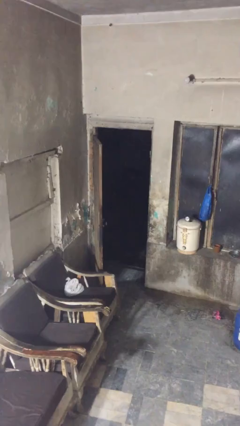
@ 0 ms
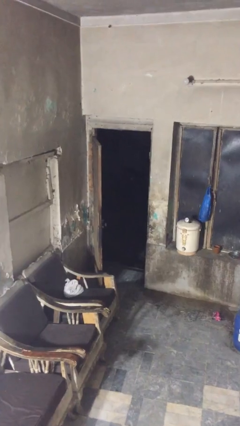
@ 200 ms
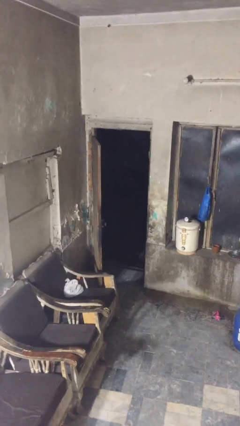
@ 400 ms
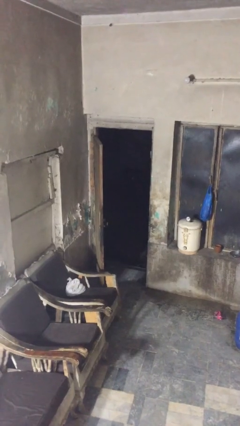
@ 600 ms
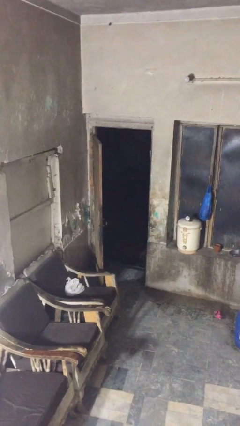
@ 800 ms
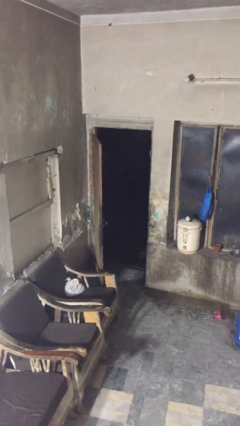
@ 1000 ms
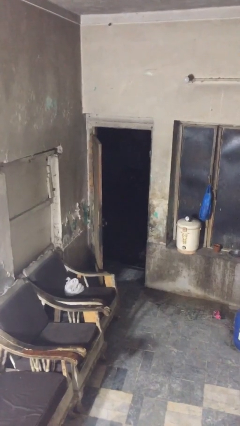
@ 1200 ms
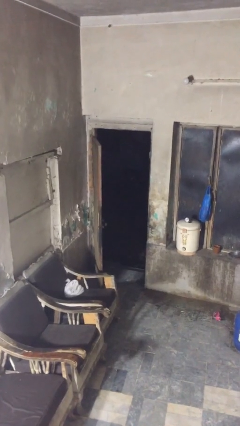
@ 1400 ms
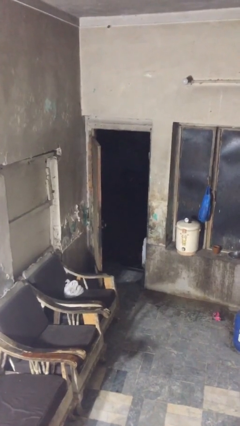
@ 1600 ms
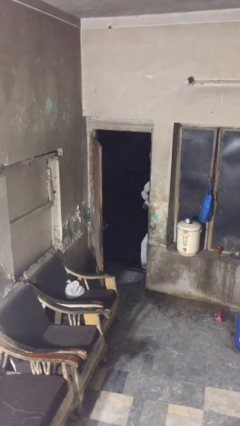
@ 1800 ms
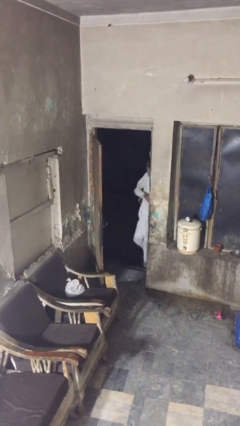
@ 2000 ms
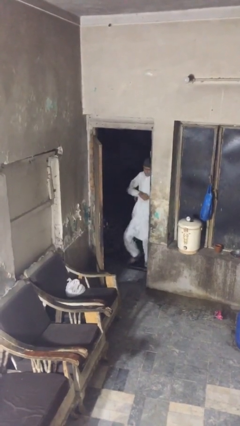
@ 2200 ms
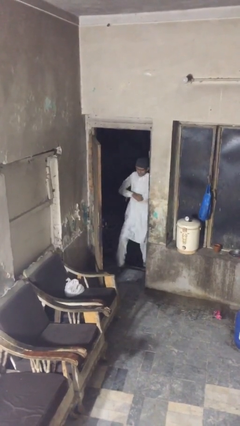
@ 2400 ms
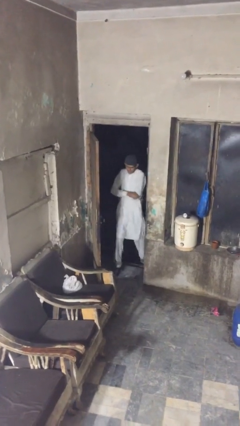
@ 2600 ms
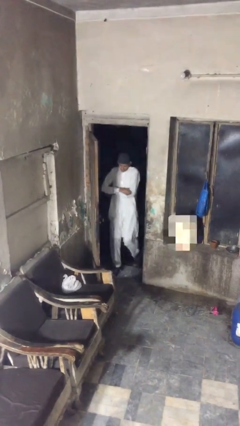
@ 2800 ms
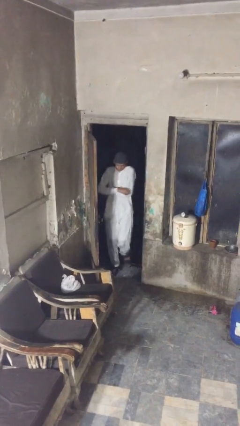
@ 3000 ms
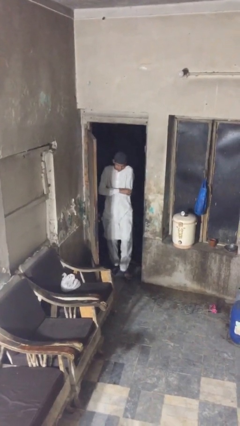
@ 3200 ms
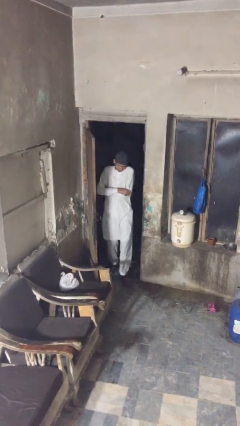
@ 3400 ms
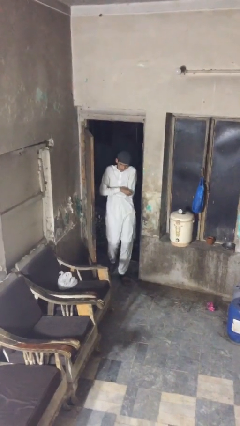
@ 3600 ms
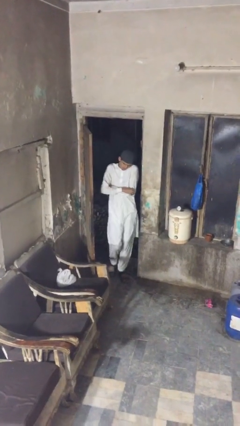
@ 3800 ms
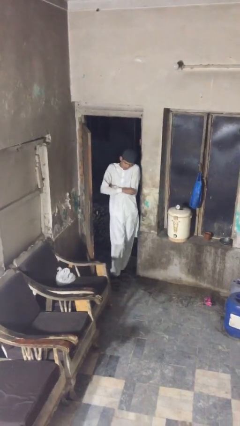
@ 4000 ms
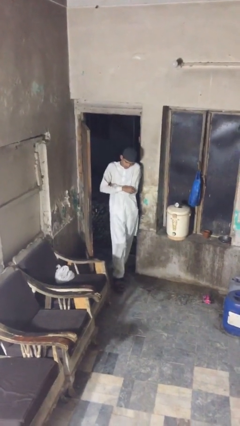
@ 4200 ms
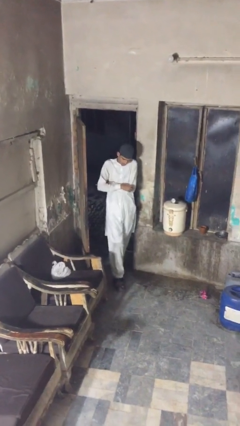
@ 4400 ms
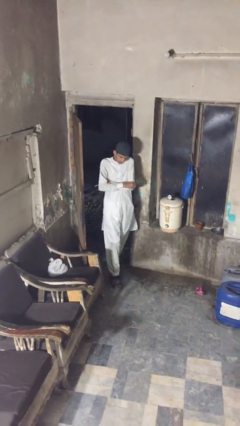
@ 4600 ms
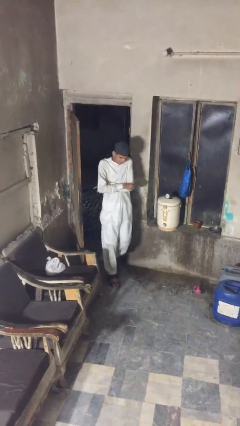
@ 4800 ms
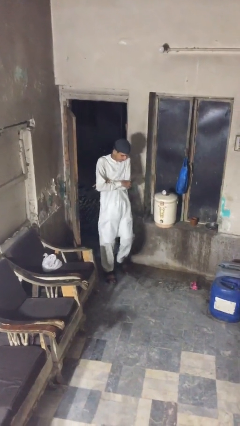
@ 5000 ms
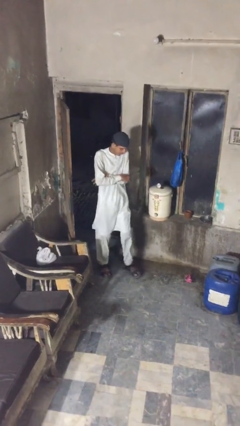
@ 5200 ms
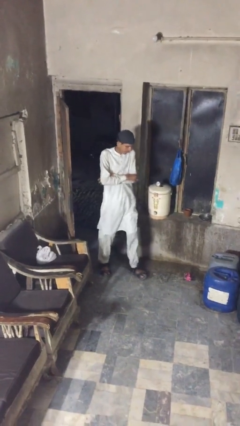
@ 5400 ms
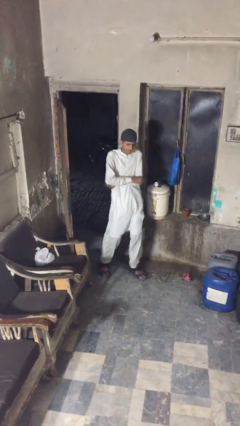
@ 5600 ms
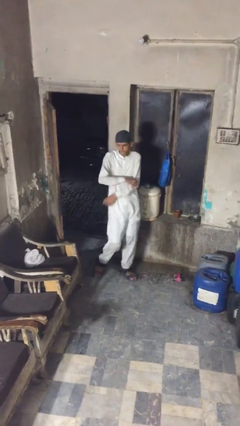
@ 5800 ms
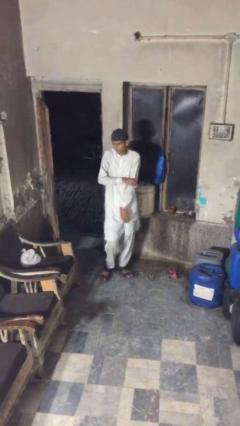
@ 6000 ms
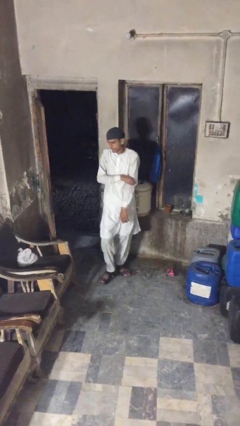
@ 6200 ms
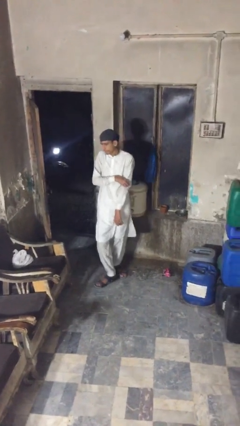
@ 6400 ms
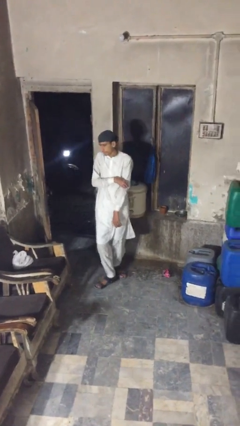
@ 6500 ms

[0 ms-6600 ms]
person enters scene through structure

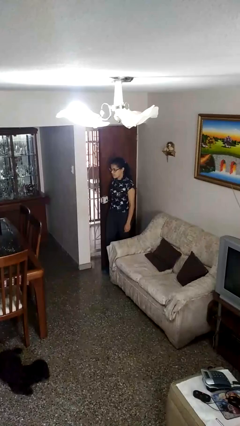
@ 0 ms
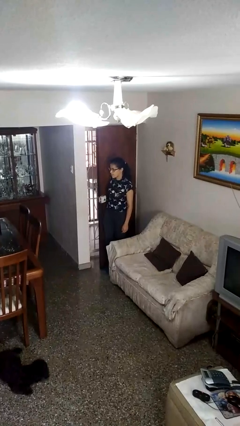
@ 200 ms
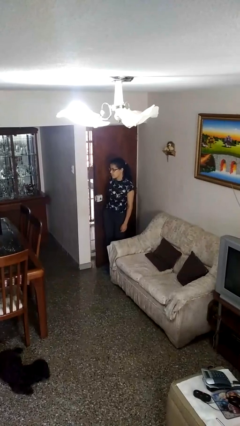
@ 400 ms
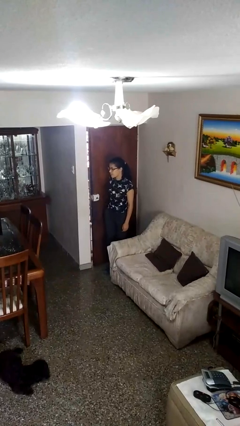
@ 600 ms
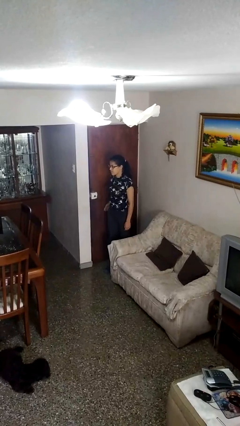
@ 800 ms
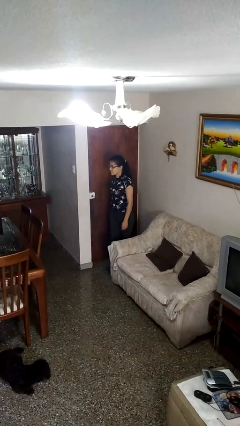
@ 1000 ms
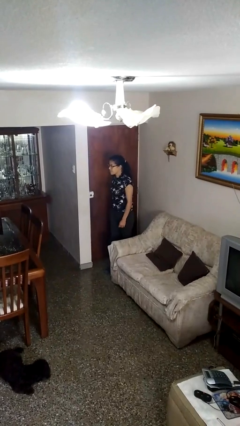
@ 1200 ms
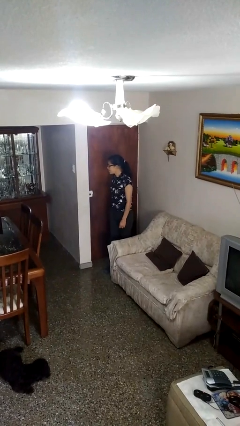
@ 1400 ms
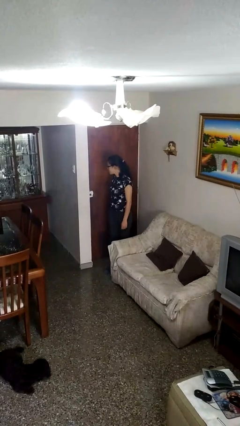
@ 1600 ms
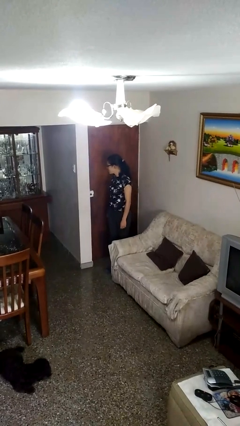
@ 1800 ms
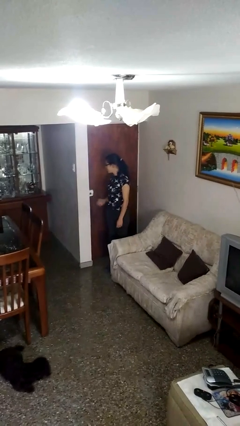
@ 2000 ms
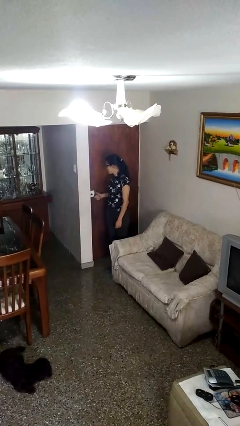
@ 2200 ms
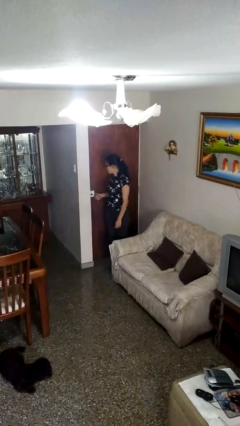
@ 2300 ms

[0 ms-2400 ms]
person closes door with hip

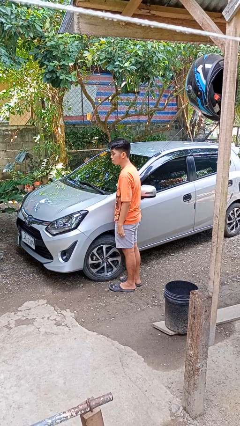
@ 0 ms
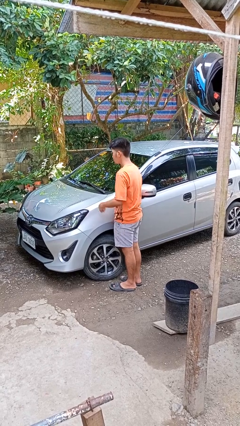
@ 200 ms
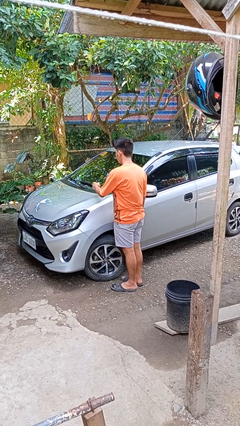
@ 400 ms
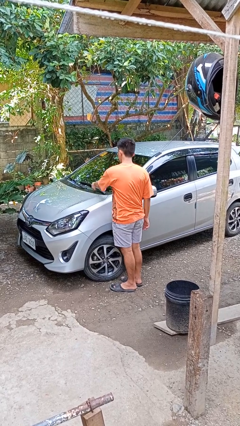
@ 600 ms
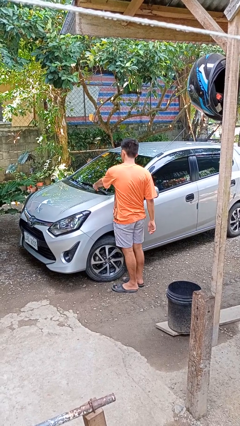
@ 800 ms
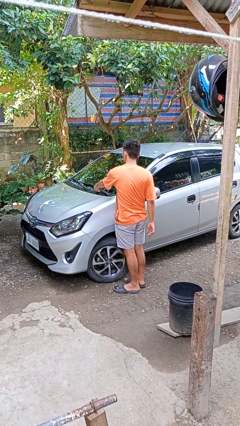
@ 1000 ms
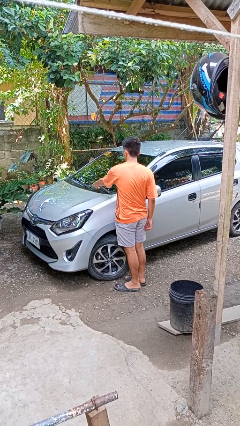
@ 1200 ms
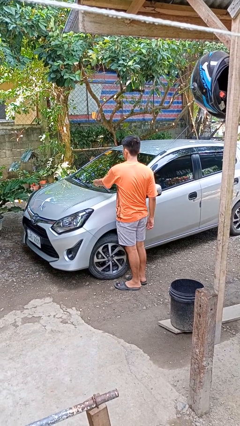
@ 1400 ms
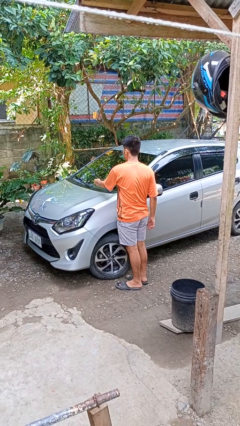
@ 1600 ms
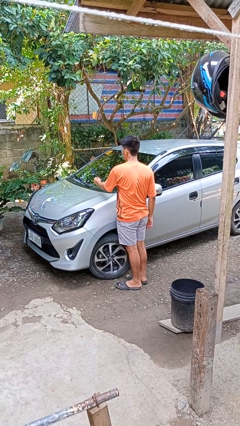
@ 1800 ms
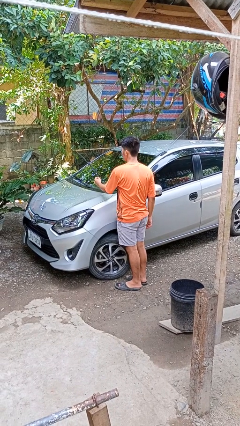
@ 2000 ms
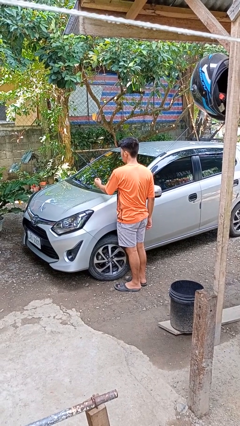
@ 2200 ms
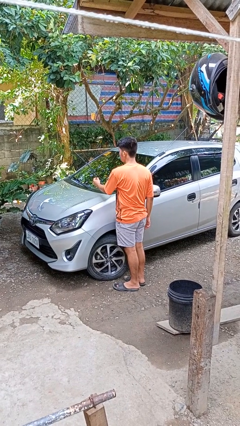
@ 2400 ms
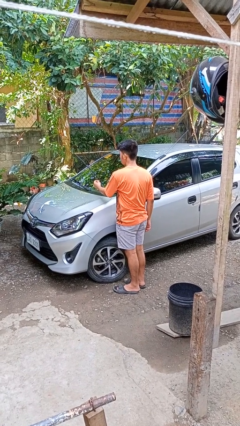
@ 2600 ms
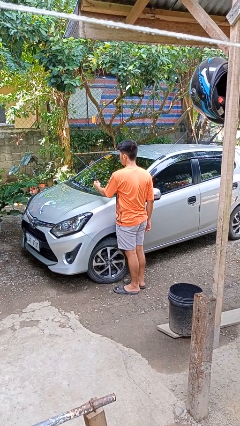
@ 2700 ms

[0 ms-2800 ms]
person flips up car wipers

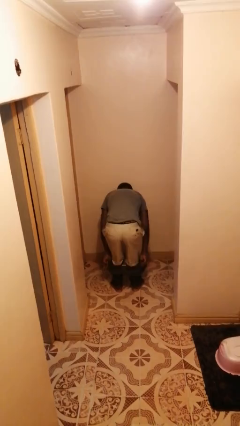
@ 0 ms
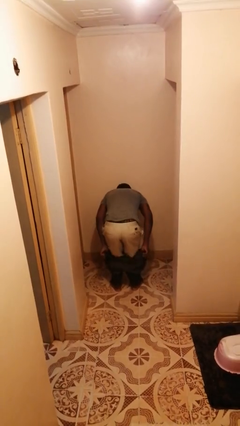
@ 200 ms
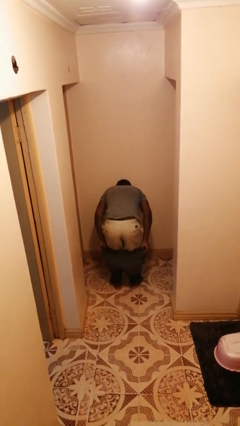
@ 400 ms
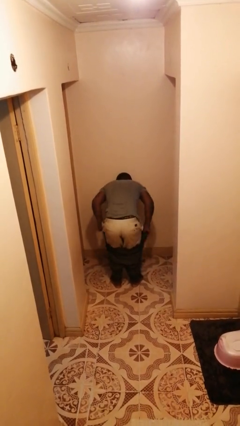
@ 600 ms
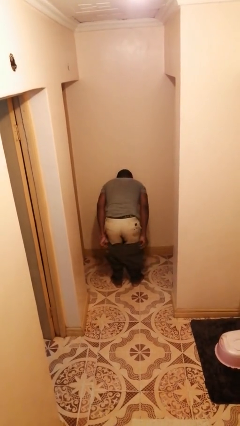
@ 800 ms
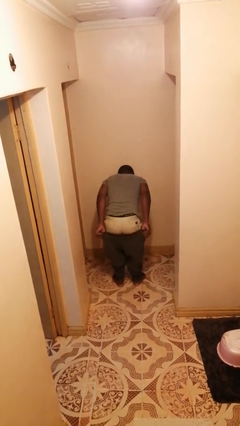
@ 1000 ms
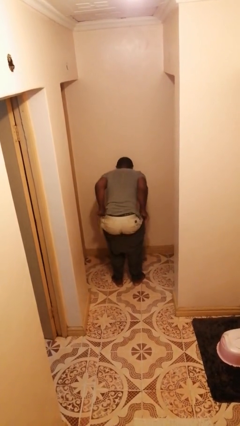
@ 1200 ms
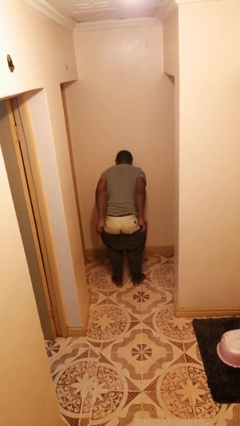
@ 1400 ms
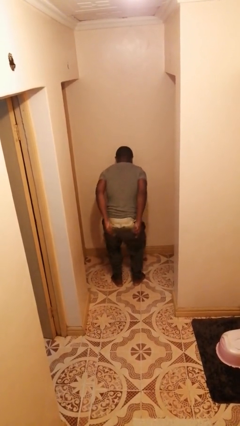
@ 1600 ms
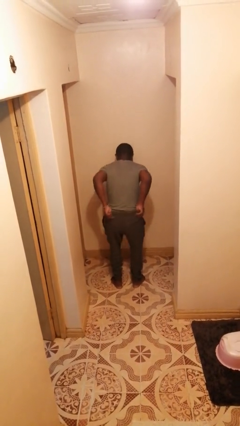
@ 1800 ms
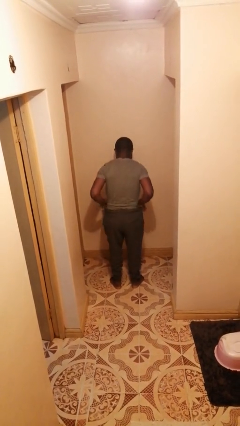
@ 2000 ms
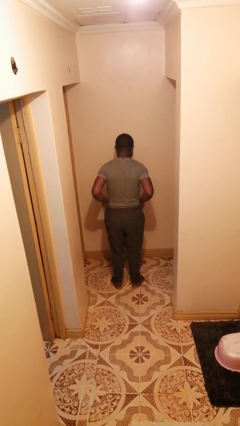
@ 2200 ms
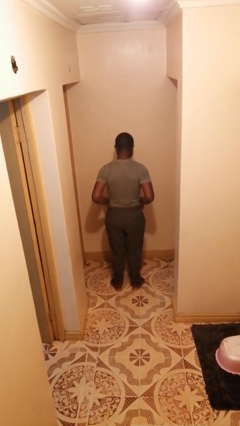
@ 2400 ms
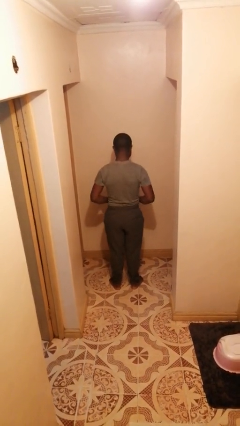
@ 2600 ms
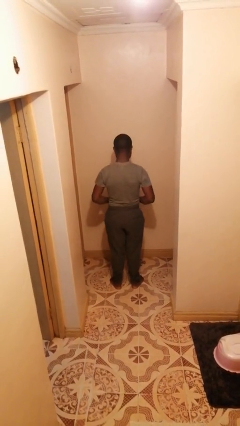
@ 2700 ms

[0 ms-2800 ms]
person puts on pants

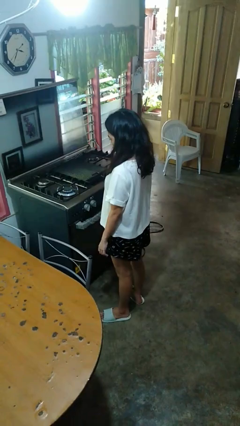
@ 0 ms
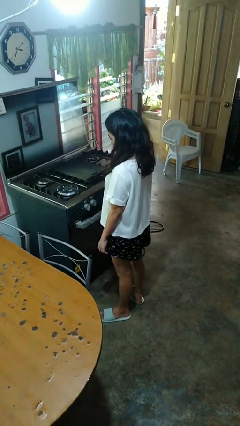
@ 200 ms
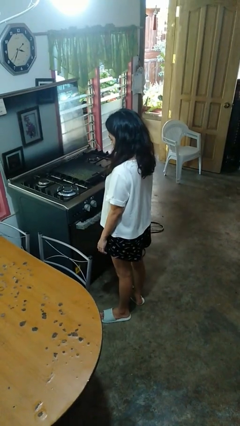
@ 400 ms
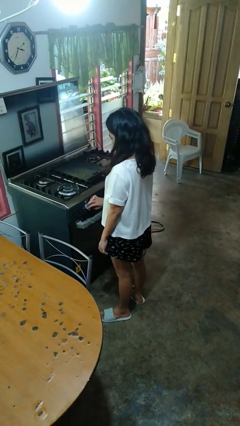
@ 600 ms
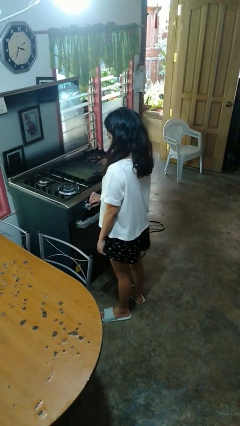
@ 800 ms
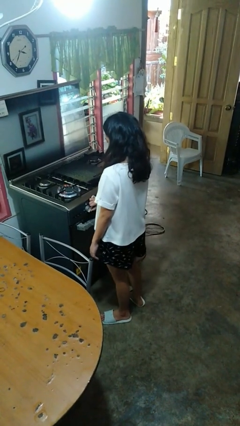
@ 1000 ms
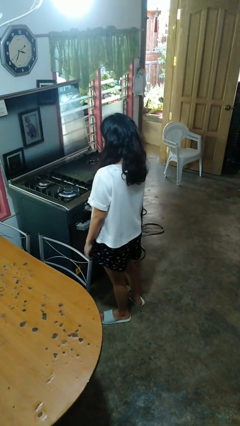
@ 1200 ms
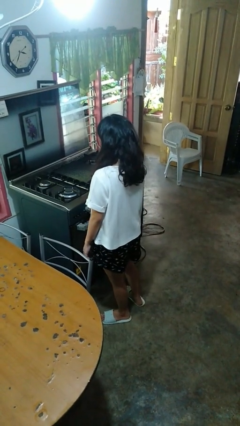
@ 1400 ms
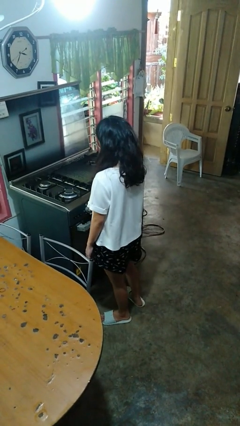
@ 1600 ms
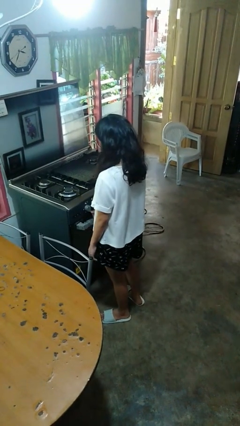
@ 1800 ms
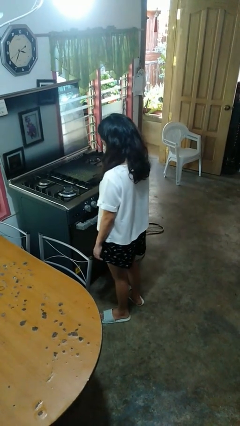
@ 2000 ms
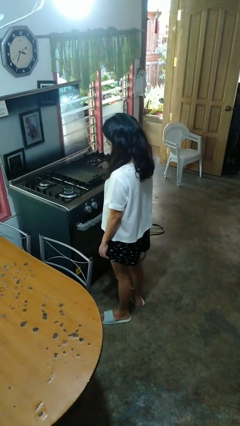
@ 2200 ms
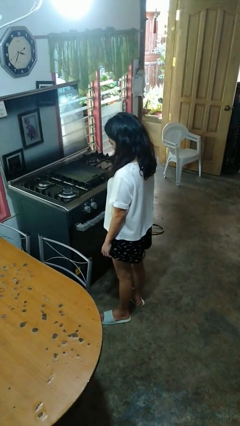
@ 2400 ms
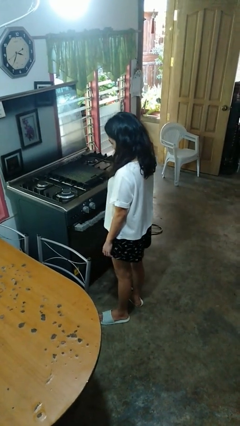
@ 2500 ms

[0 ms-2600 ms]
person turns off stovetop
